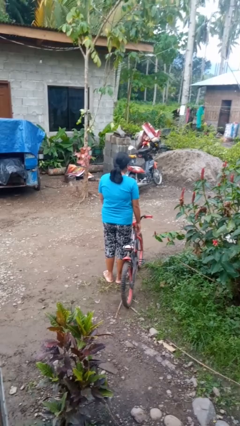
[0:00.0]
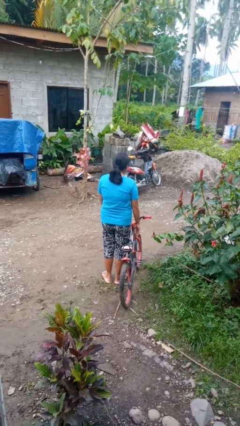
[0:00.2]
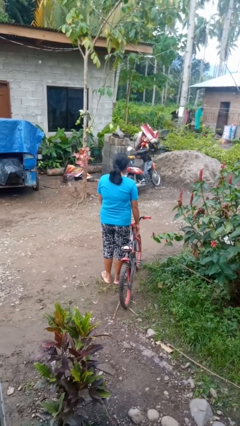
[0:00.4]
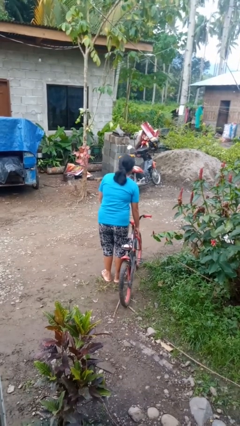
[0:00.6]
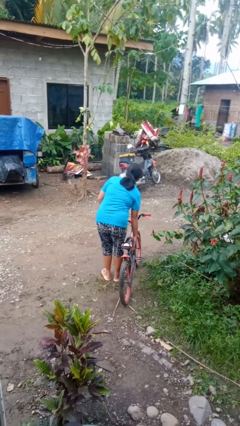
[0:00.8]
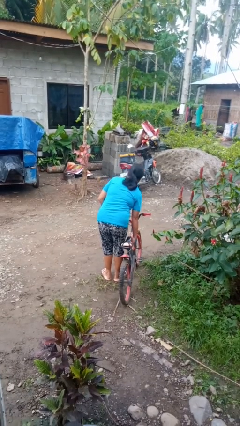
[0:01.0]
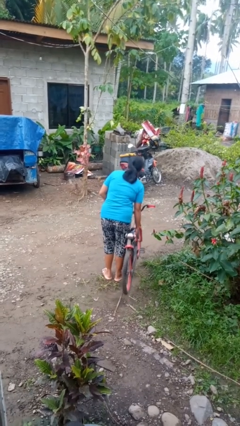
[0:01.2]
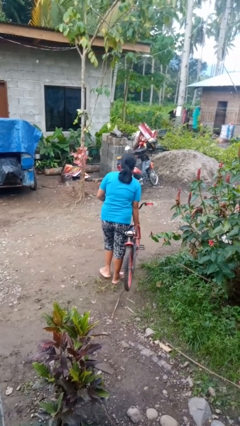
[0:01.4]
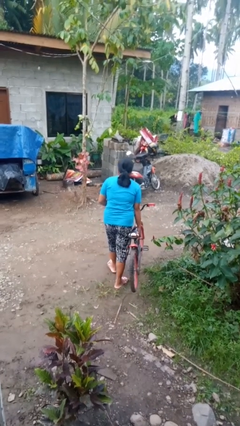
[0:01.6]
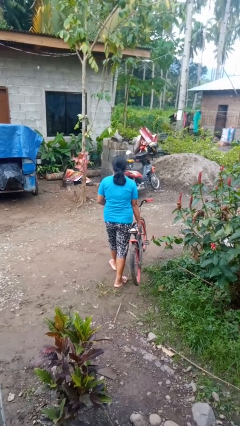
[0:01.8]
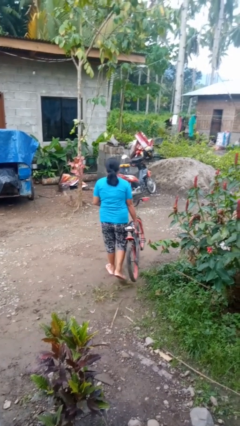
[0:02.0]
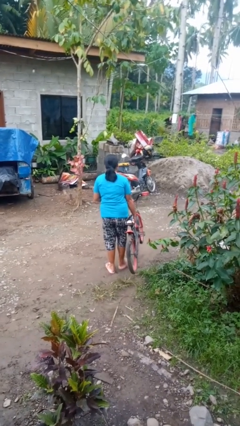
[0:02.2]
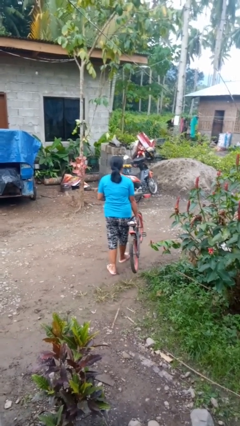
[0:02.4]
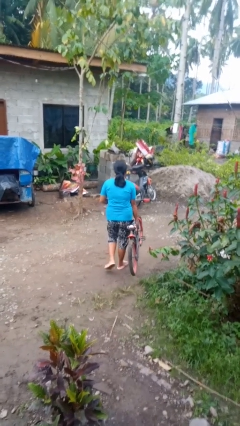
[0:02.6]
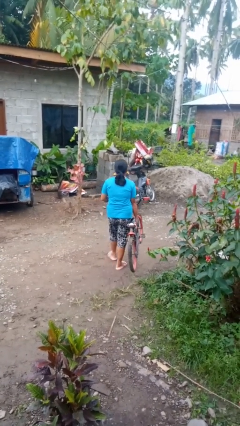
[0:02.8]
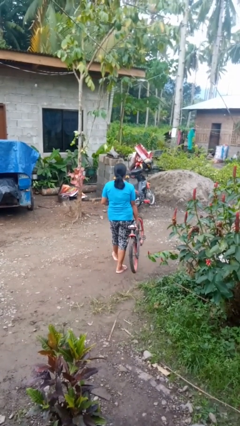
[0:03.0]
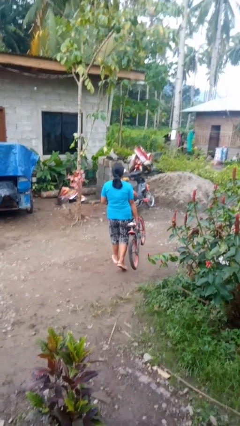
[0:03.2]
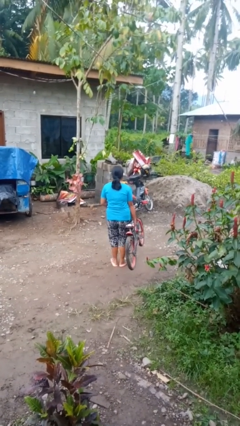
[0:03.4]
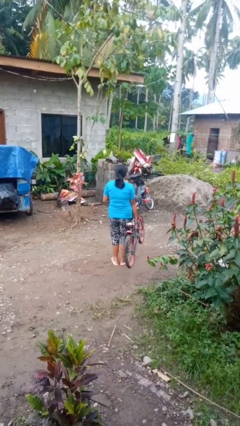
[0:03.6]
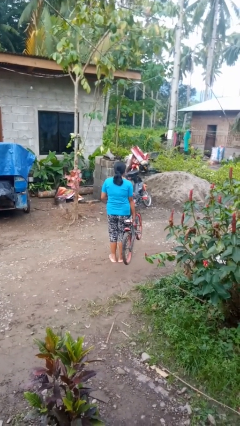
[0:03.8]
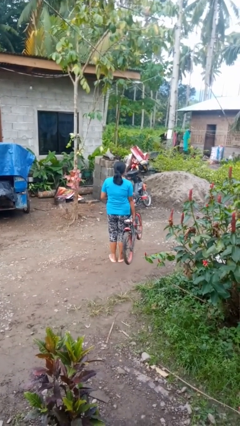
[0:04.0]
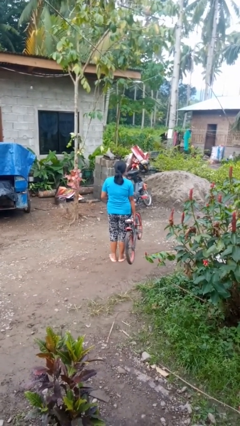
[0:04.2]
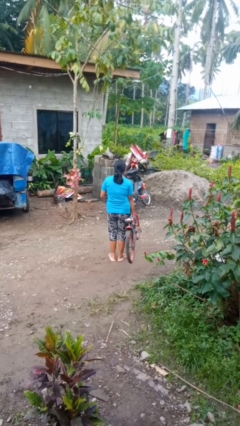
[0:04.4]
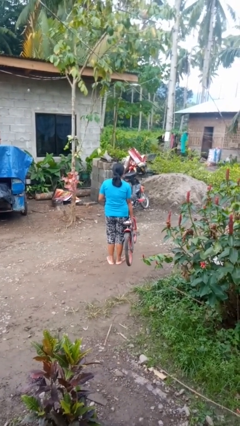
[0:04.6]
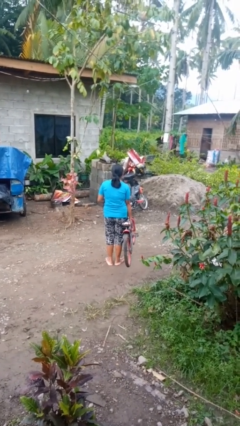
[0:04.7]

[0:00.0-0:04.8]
person carries bicycle

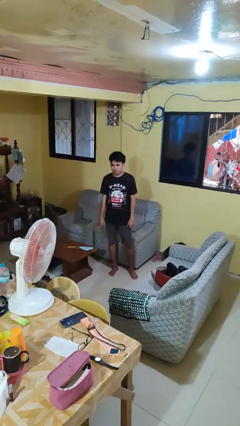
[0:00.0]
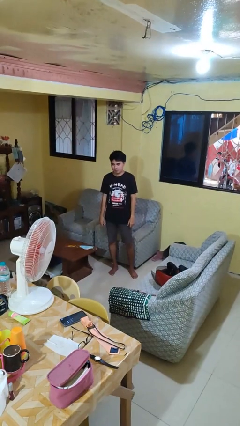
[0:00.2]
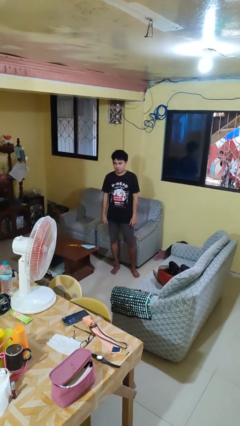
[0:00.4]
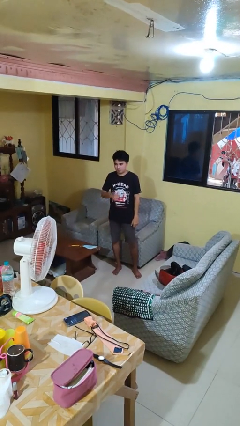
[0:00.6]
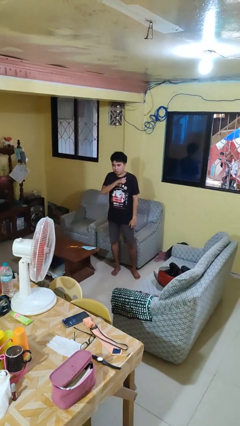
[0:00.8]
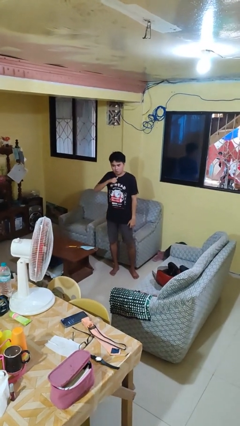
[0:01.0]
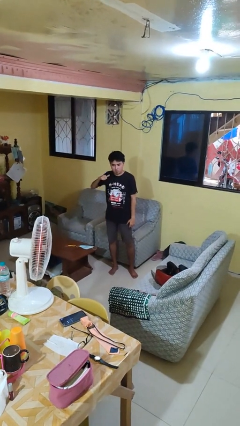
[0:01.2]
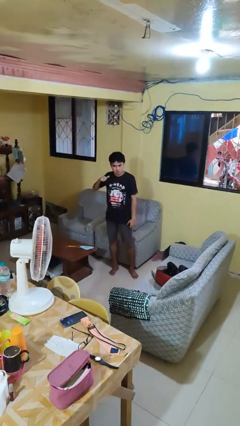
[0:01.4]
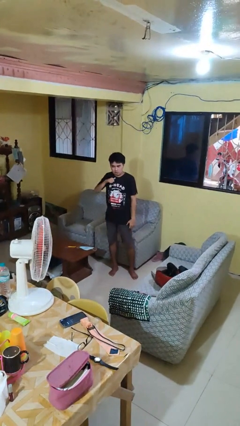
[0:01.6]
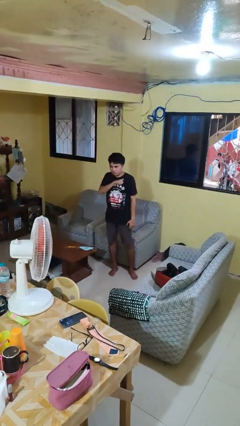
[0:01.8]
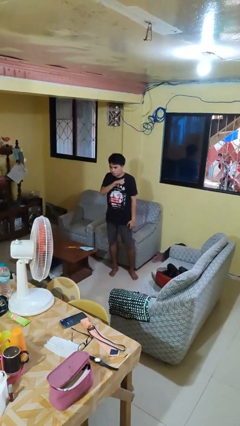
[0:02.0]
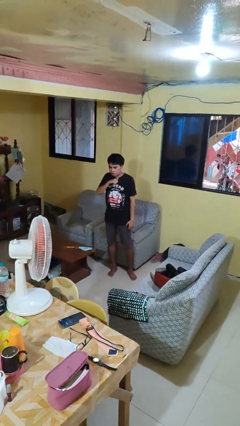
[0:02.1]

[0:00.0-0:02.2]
person gestures cut

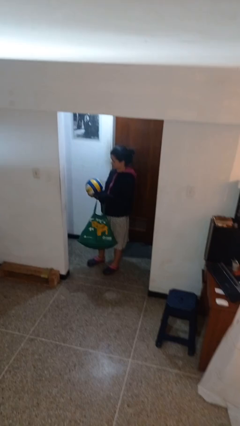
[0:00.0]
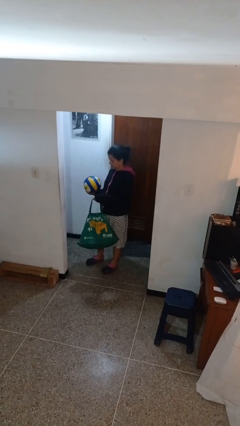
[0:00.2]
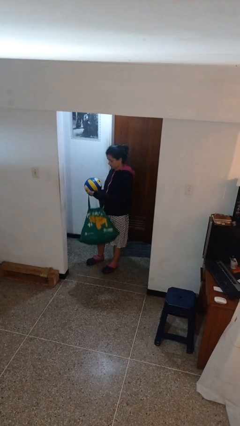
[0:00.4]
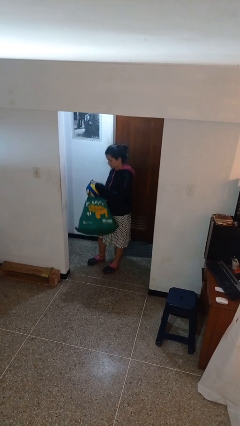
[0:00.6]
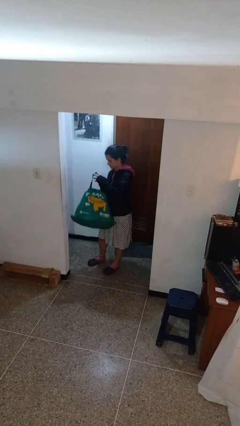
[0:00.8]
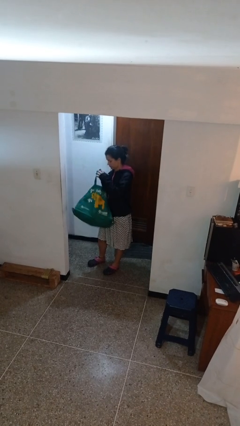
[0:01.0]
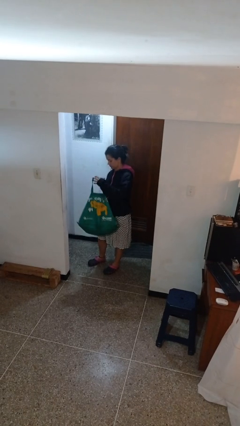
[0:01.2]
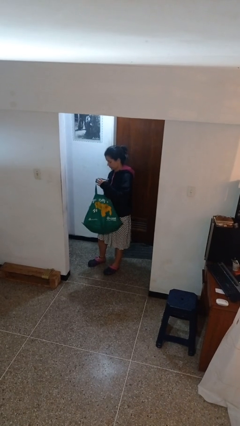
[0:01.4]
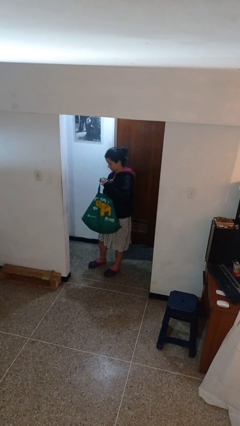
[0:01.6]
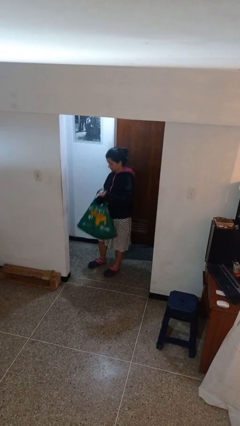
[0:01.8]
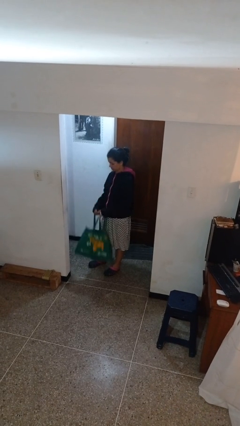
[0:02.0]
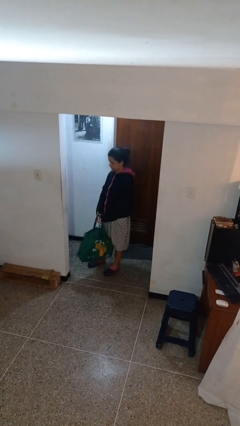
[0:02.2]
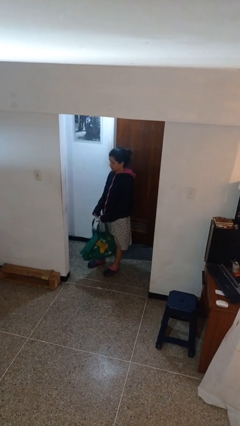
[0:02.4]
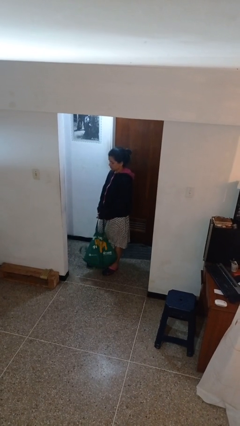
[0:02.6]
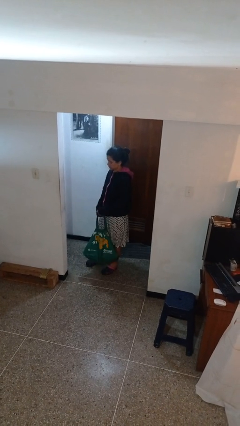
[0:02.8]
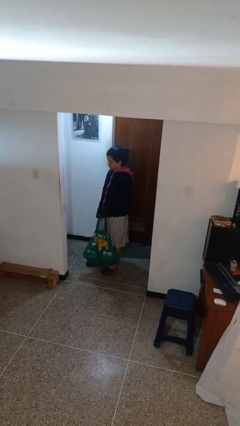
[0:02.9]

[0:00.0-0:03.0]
person puts object into bag

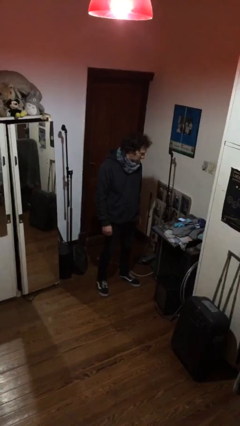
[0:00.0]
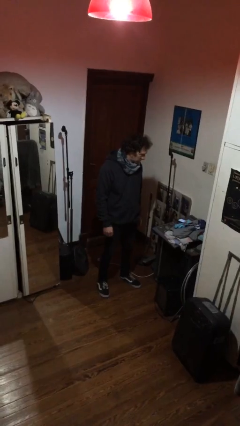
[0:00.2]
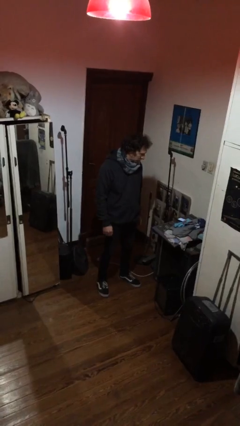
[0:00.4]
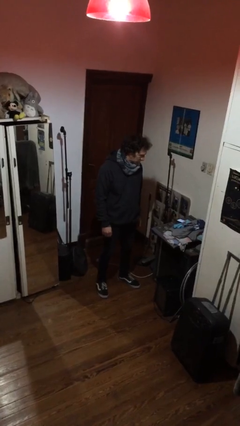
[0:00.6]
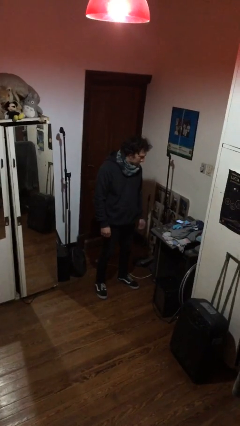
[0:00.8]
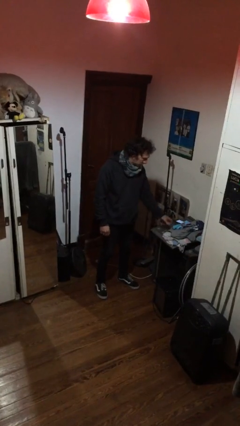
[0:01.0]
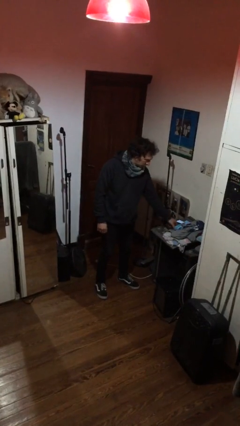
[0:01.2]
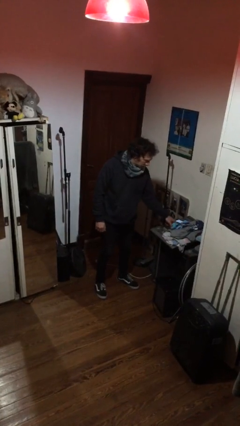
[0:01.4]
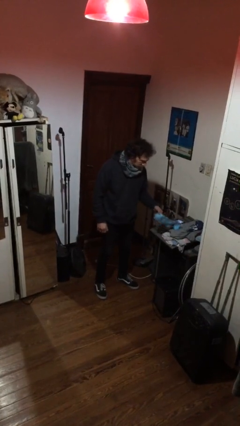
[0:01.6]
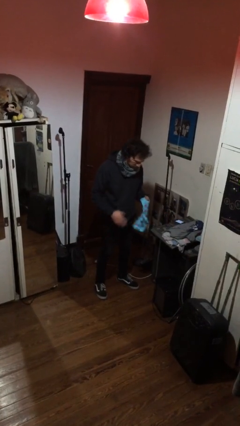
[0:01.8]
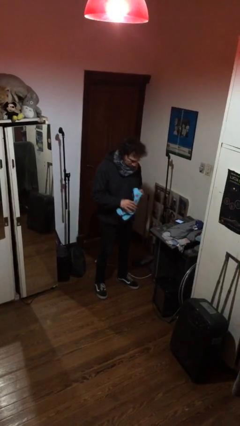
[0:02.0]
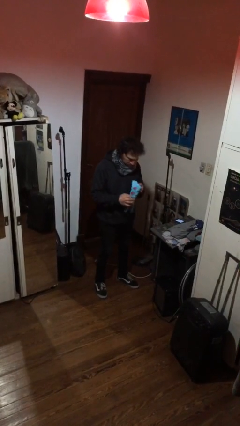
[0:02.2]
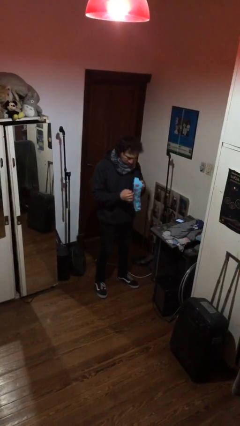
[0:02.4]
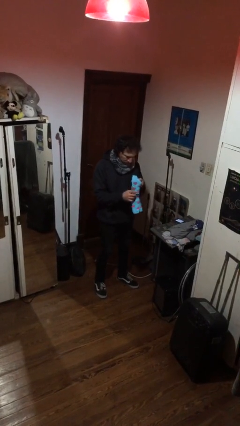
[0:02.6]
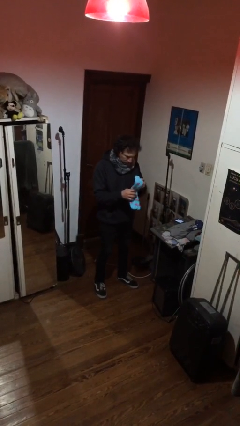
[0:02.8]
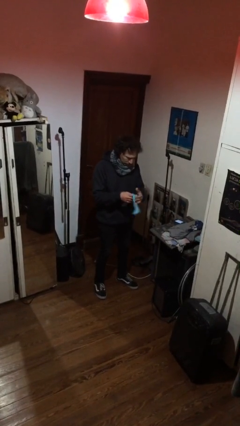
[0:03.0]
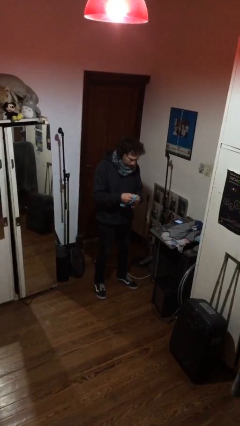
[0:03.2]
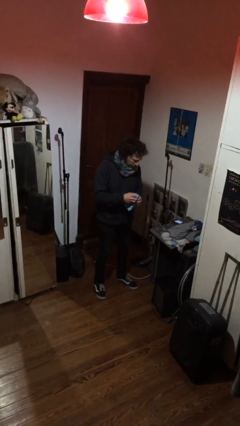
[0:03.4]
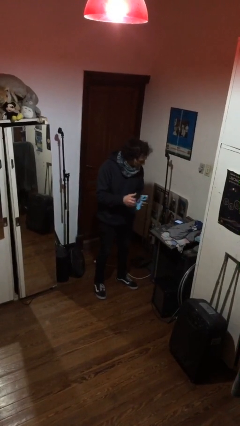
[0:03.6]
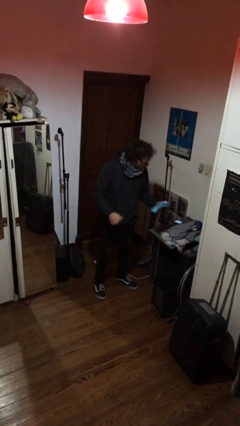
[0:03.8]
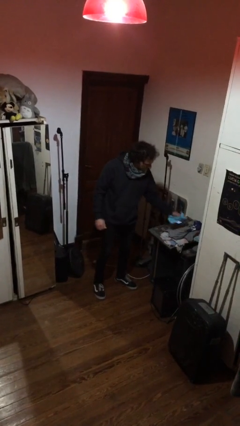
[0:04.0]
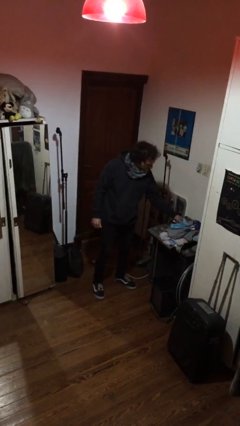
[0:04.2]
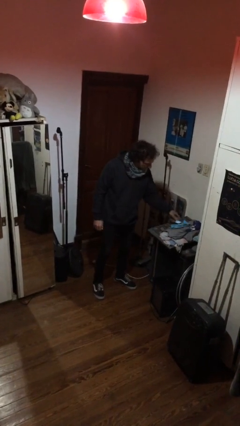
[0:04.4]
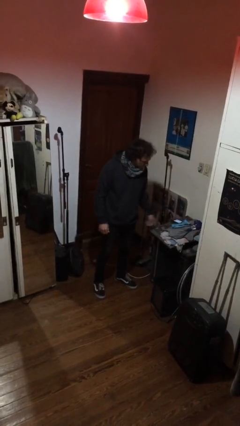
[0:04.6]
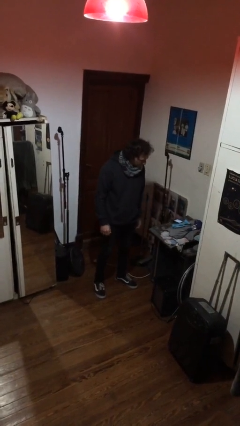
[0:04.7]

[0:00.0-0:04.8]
person folds socks

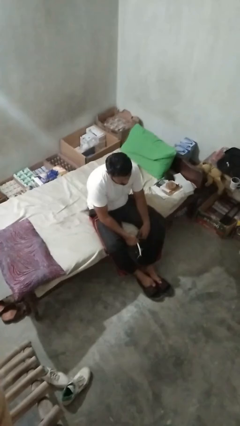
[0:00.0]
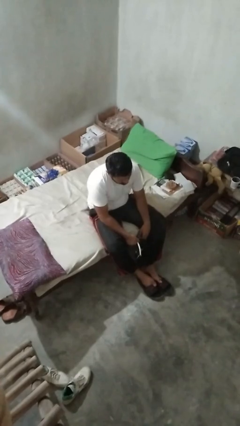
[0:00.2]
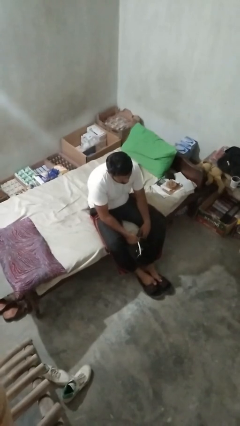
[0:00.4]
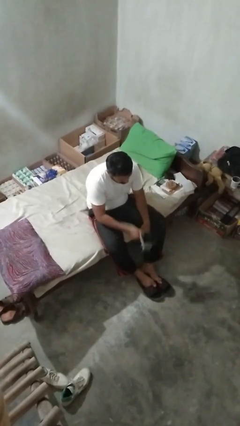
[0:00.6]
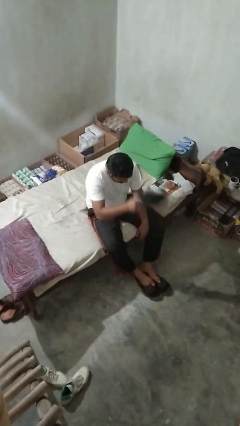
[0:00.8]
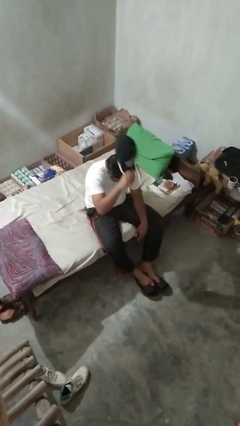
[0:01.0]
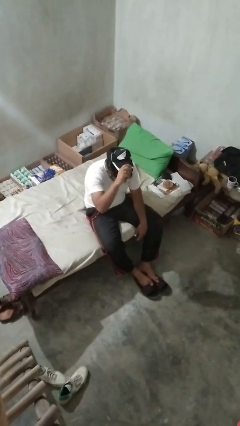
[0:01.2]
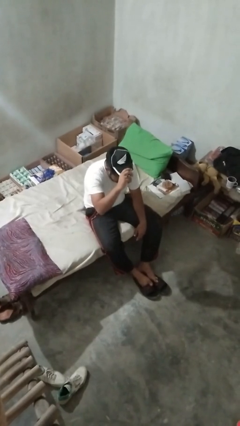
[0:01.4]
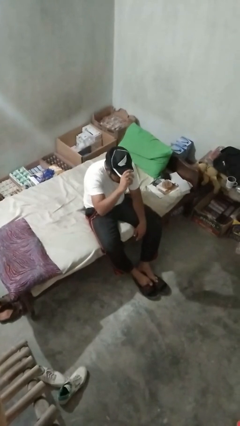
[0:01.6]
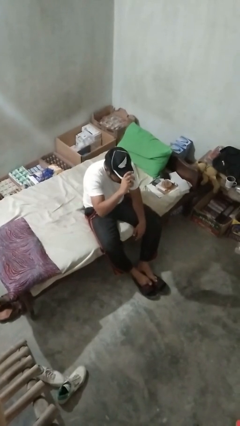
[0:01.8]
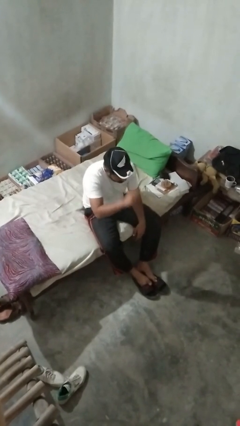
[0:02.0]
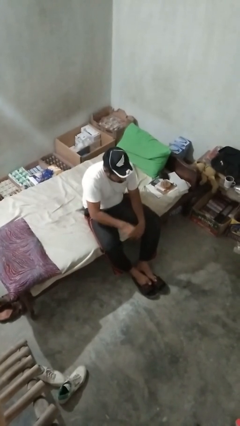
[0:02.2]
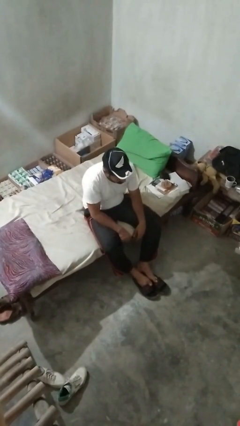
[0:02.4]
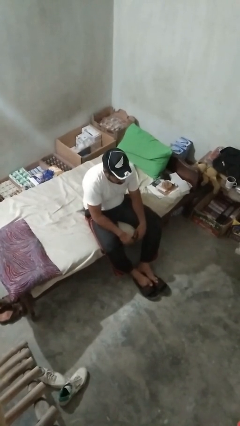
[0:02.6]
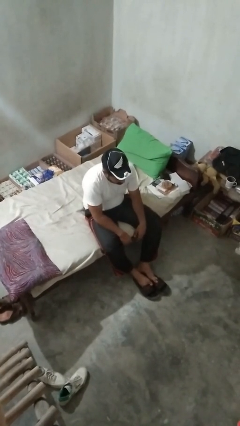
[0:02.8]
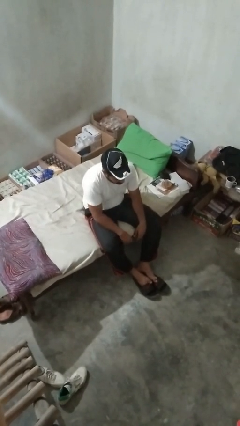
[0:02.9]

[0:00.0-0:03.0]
person puts on hat
